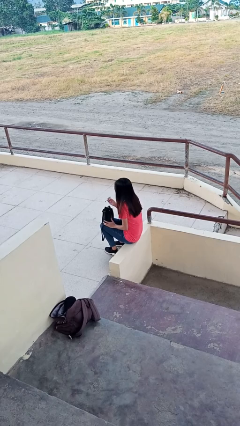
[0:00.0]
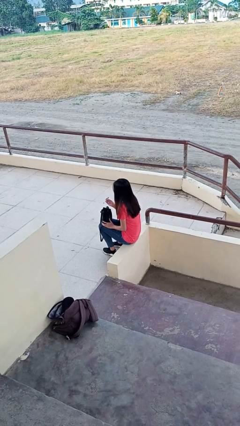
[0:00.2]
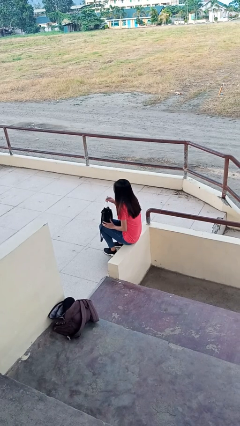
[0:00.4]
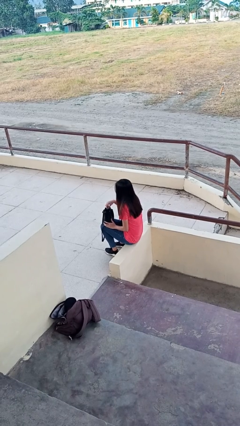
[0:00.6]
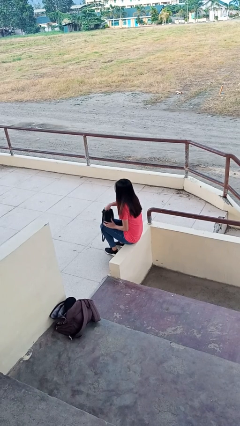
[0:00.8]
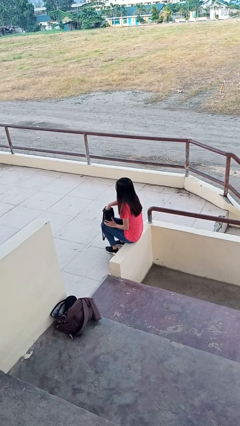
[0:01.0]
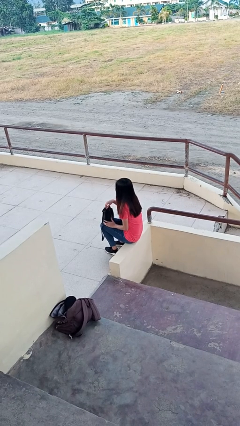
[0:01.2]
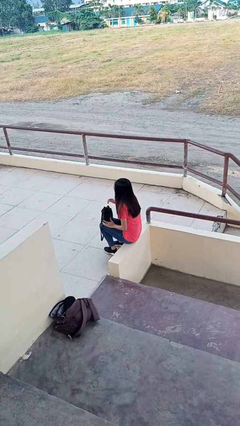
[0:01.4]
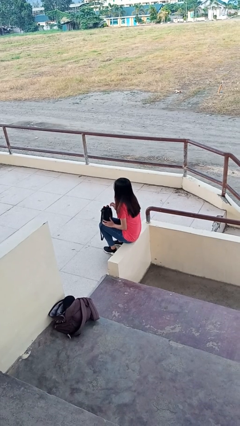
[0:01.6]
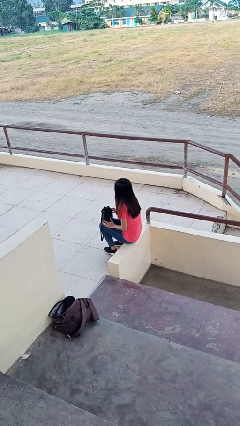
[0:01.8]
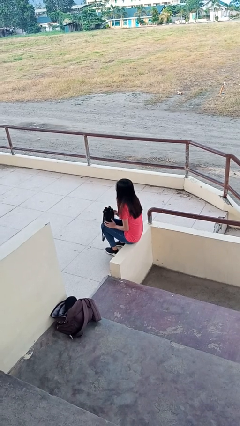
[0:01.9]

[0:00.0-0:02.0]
person puts object into purse

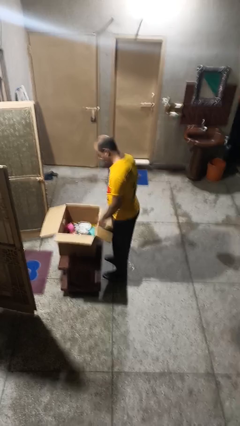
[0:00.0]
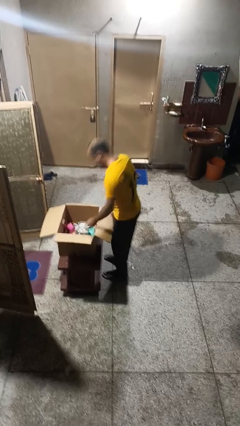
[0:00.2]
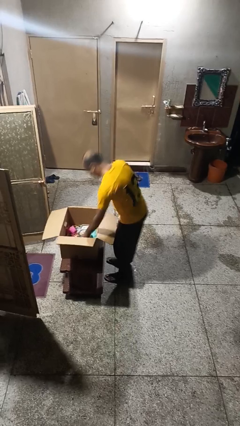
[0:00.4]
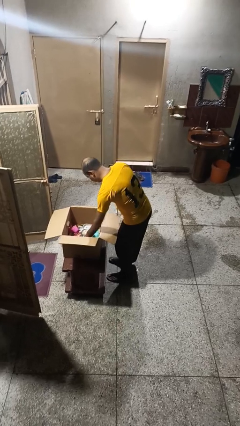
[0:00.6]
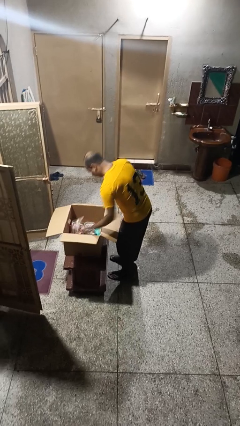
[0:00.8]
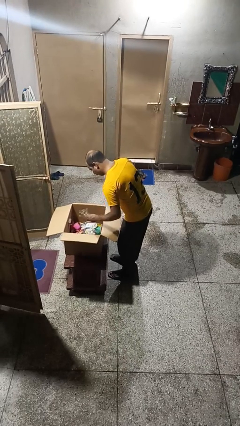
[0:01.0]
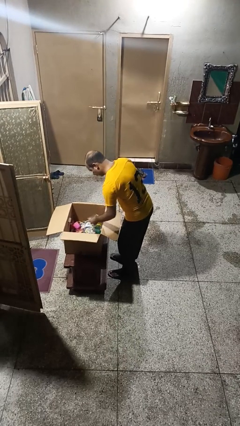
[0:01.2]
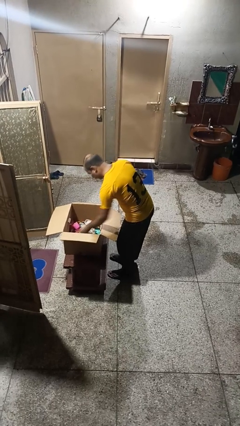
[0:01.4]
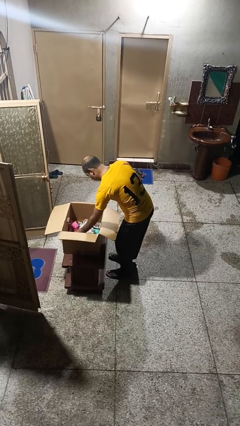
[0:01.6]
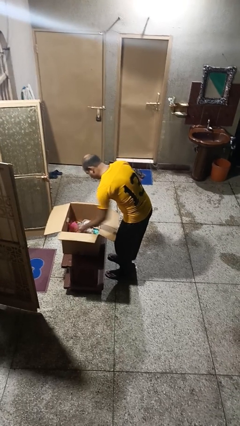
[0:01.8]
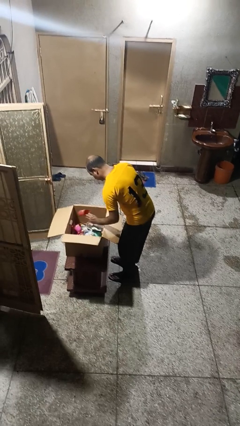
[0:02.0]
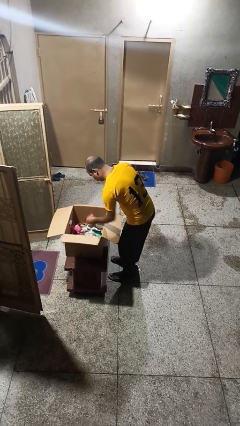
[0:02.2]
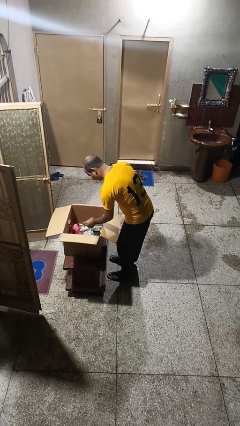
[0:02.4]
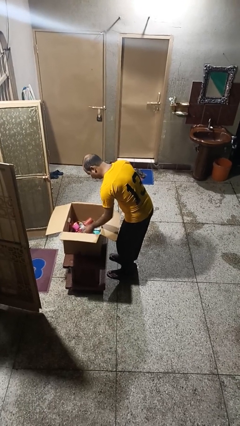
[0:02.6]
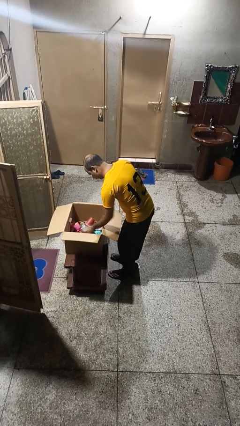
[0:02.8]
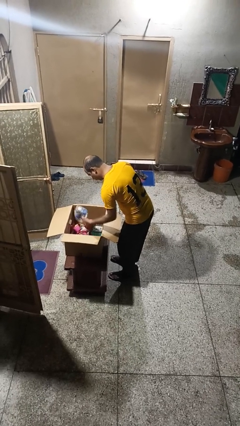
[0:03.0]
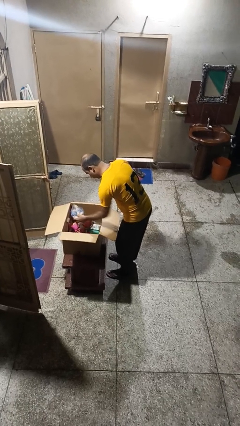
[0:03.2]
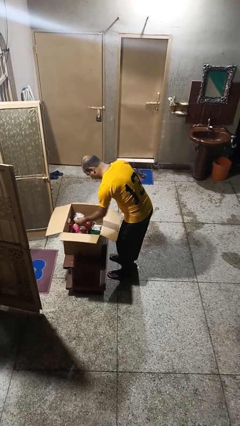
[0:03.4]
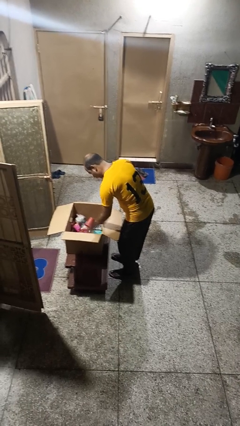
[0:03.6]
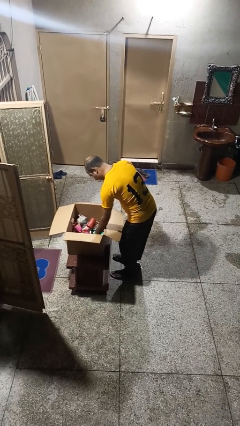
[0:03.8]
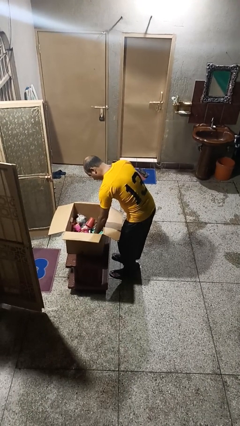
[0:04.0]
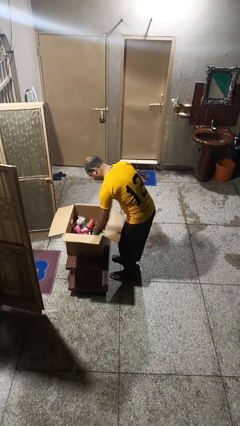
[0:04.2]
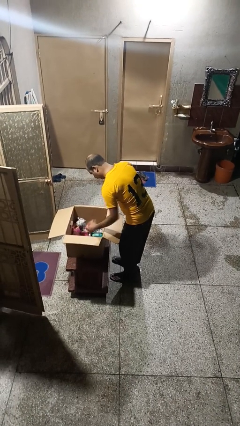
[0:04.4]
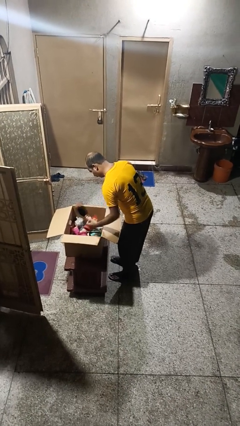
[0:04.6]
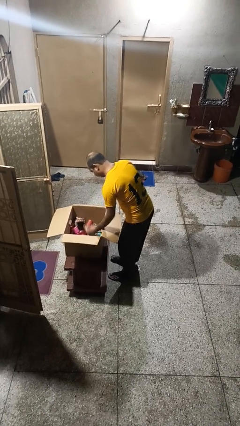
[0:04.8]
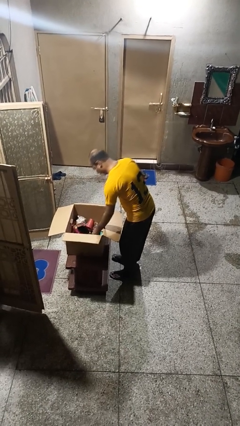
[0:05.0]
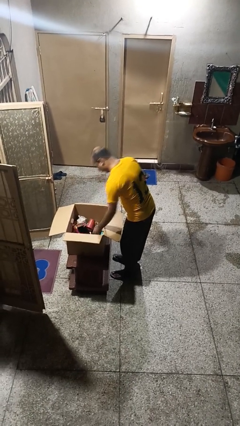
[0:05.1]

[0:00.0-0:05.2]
person searches in box

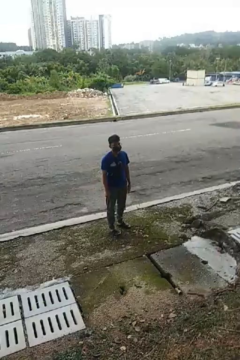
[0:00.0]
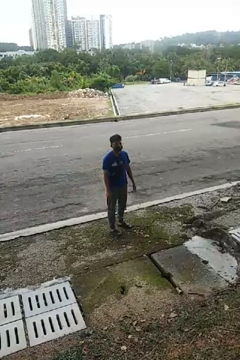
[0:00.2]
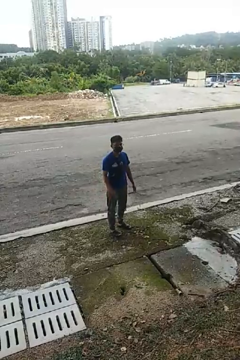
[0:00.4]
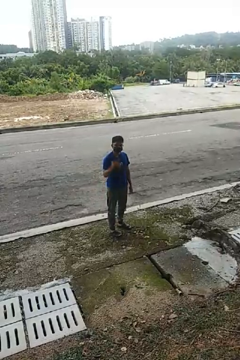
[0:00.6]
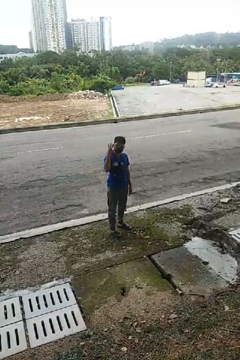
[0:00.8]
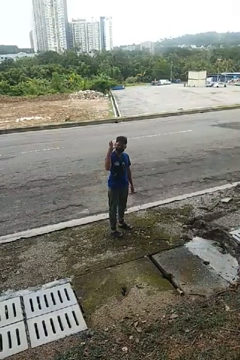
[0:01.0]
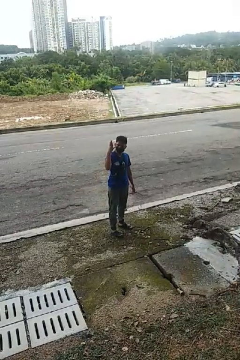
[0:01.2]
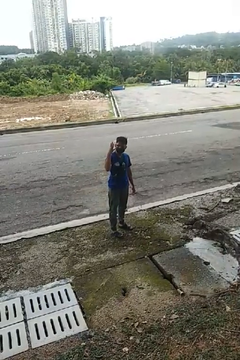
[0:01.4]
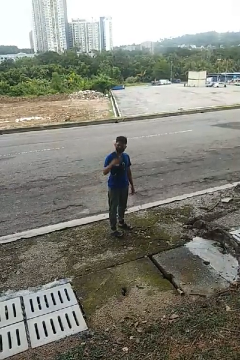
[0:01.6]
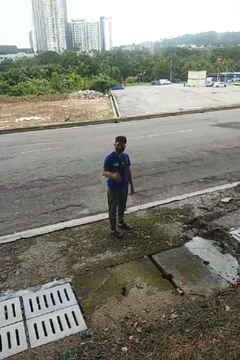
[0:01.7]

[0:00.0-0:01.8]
person gestures number four

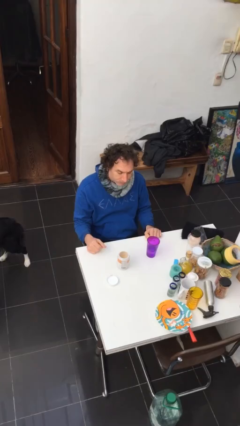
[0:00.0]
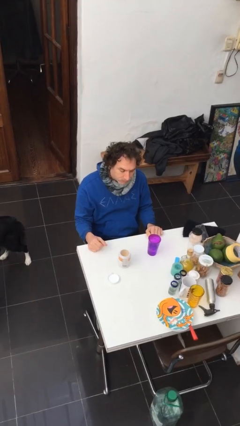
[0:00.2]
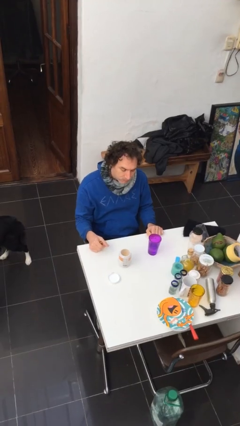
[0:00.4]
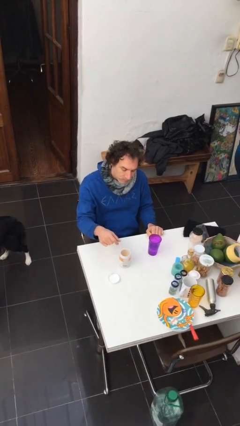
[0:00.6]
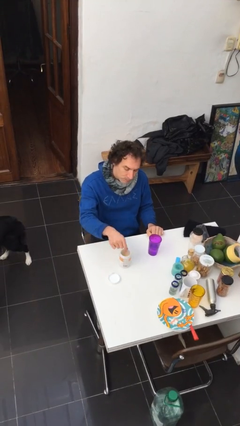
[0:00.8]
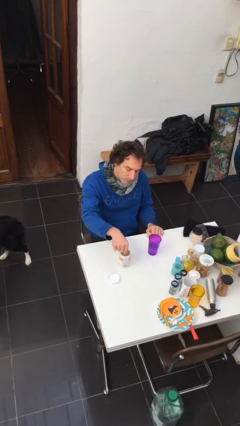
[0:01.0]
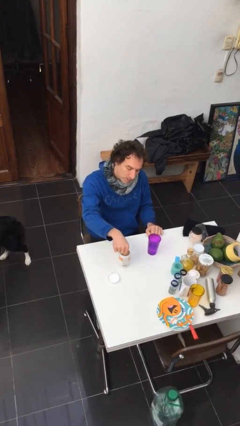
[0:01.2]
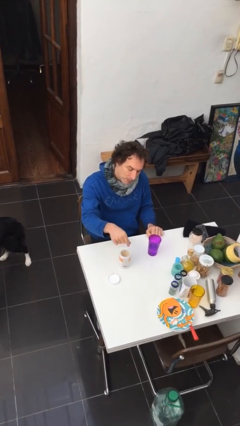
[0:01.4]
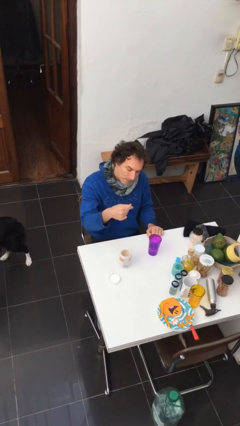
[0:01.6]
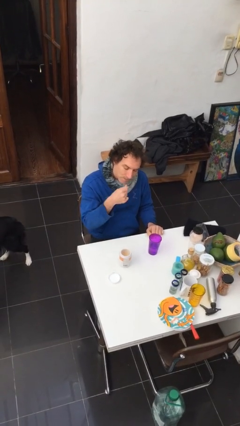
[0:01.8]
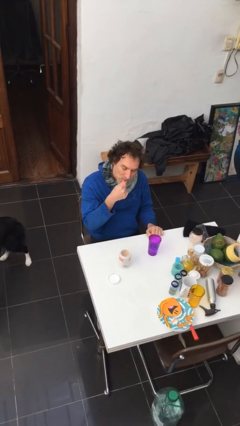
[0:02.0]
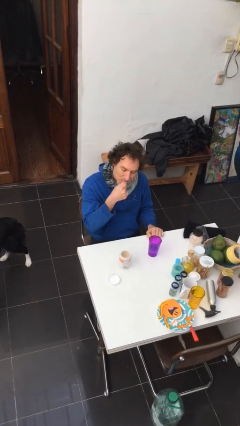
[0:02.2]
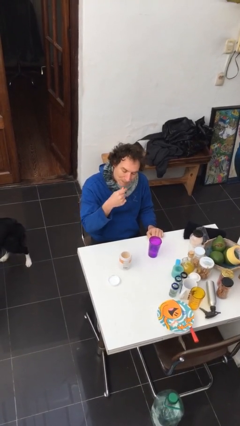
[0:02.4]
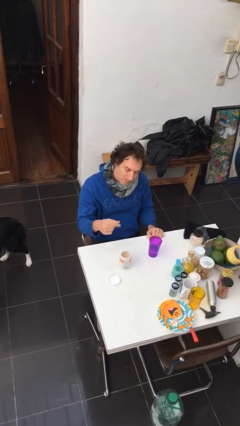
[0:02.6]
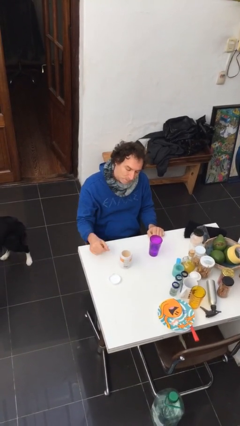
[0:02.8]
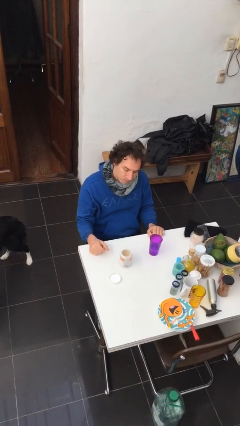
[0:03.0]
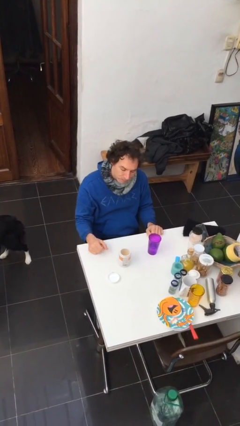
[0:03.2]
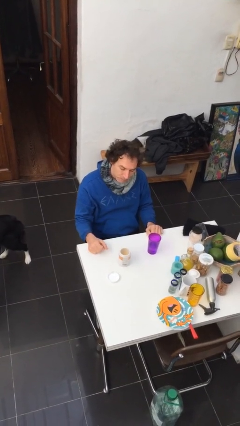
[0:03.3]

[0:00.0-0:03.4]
person takes medicine pills

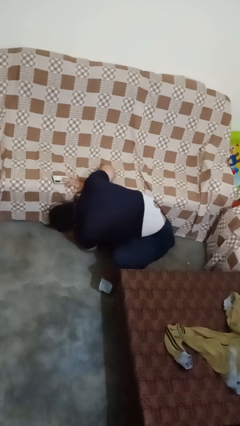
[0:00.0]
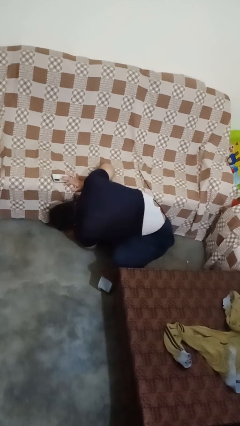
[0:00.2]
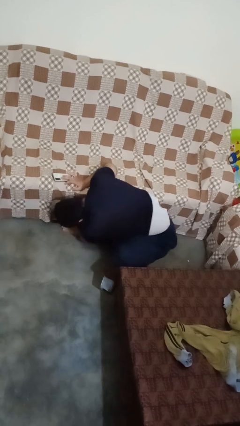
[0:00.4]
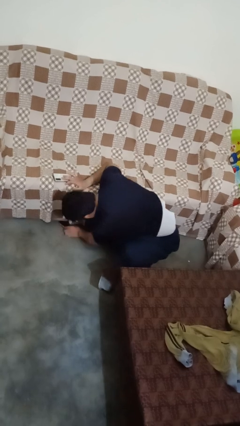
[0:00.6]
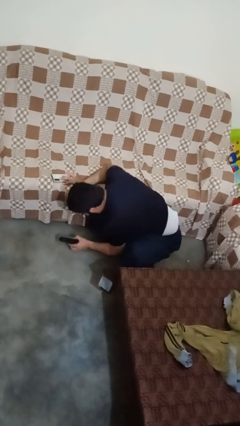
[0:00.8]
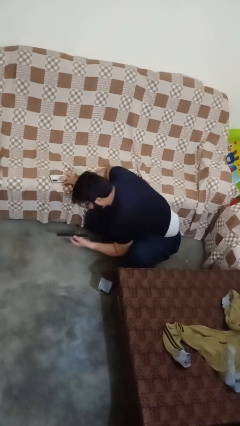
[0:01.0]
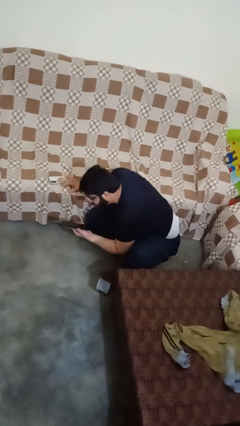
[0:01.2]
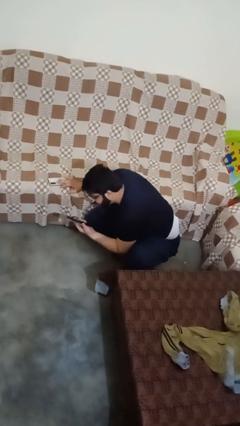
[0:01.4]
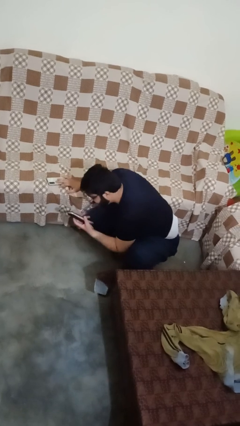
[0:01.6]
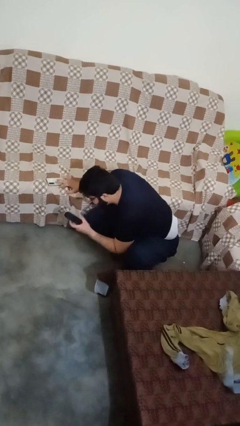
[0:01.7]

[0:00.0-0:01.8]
person searches under couch

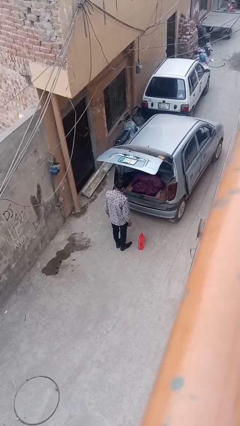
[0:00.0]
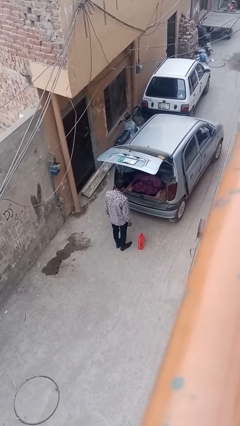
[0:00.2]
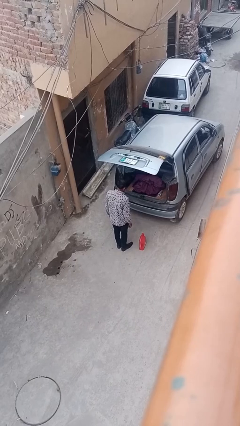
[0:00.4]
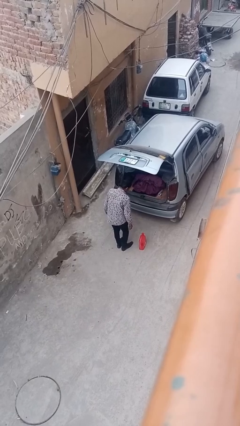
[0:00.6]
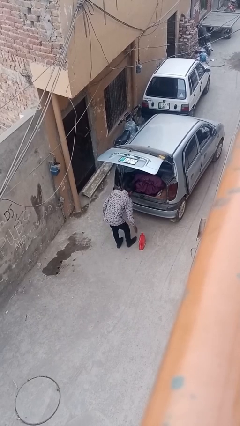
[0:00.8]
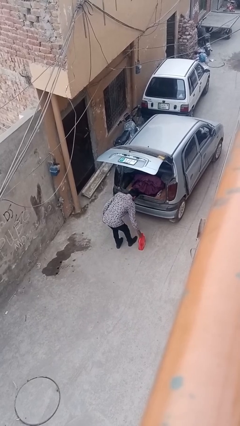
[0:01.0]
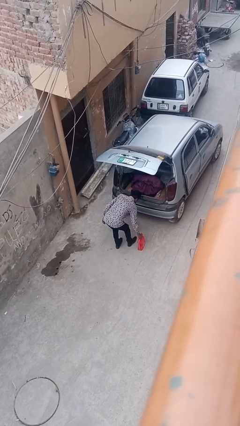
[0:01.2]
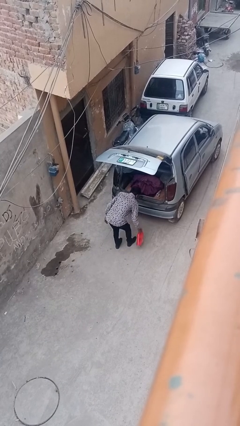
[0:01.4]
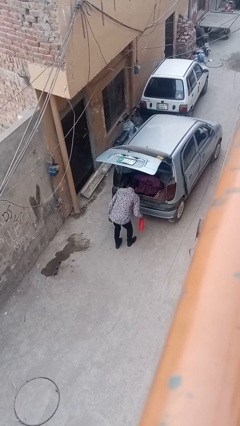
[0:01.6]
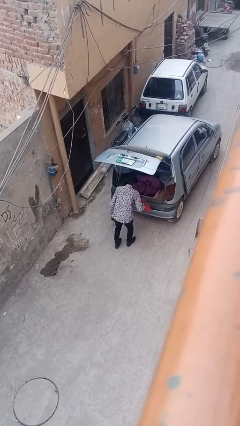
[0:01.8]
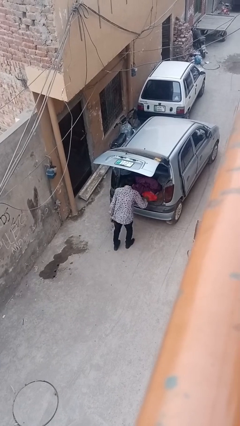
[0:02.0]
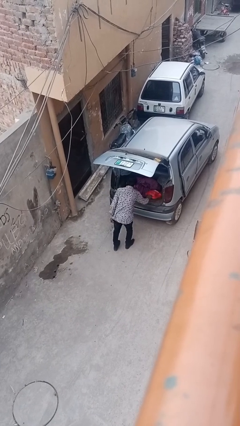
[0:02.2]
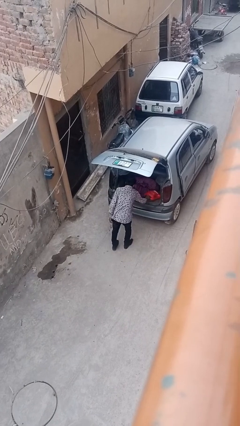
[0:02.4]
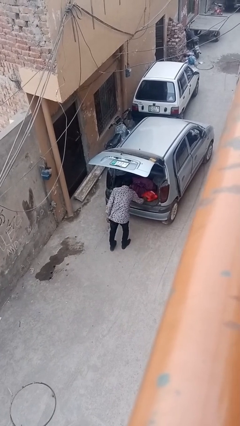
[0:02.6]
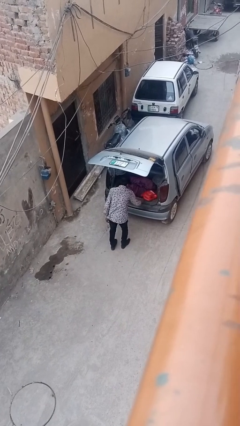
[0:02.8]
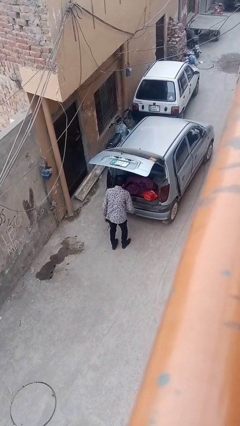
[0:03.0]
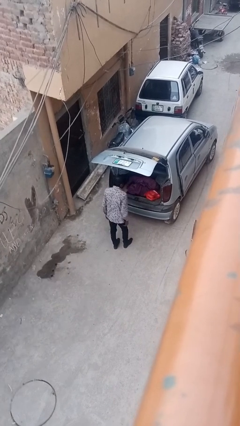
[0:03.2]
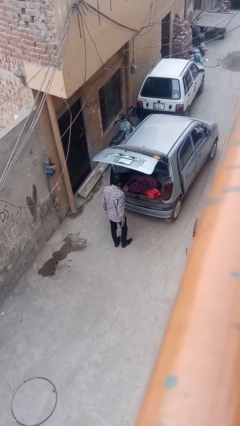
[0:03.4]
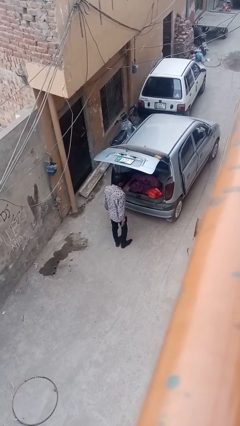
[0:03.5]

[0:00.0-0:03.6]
person loads car
